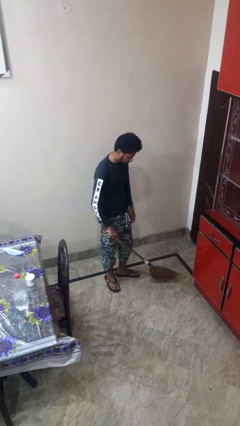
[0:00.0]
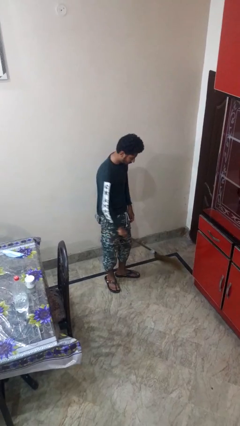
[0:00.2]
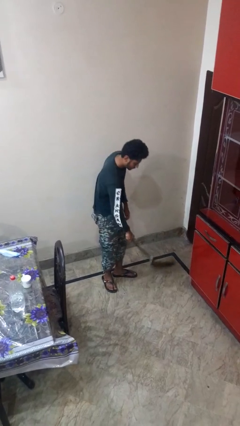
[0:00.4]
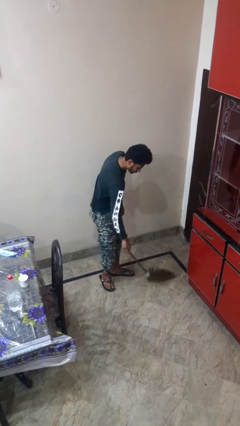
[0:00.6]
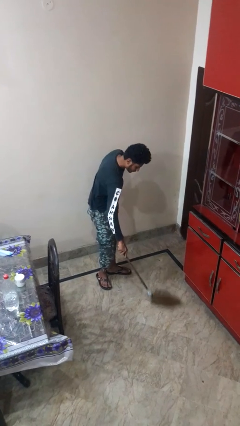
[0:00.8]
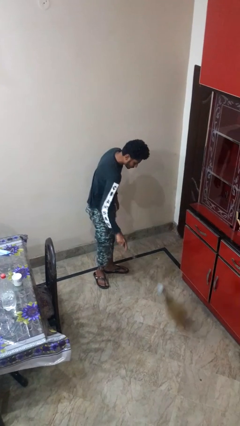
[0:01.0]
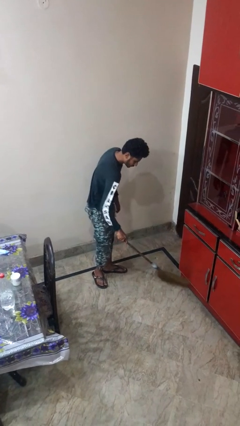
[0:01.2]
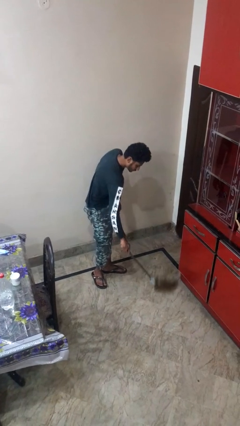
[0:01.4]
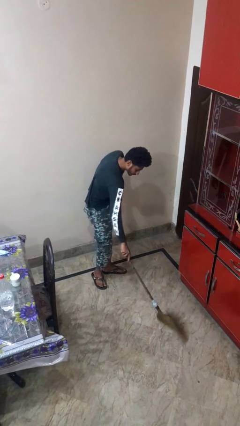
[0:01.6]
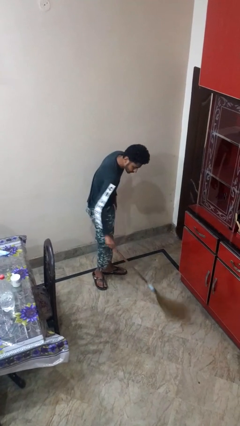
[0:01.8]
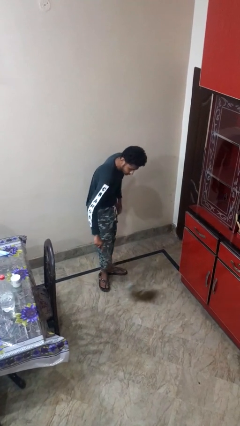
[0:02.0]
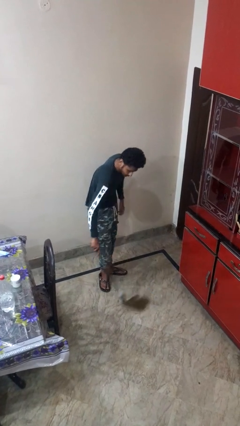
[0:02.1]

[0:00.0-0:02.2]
person sweeps floor

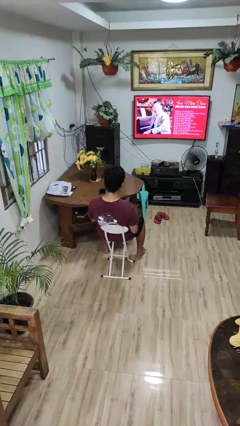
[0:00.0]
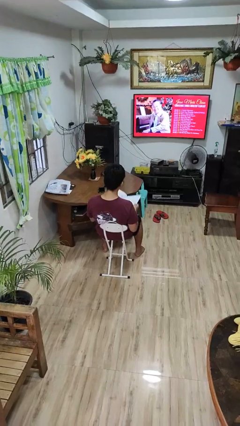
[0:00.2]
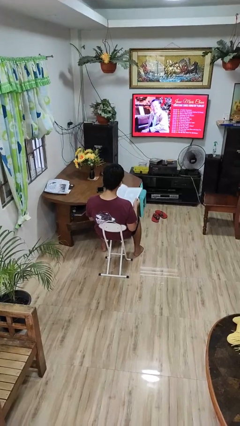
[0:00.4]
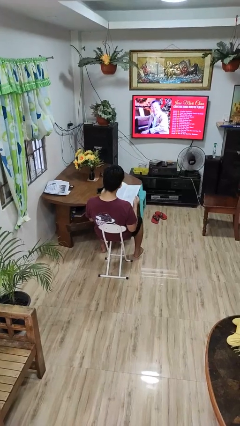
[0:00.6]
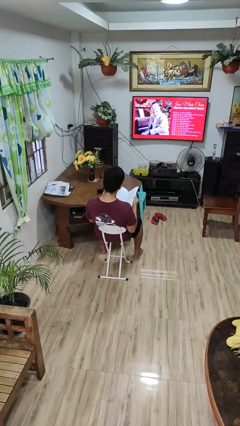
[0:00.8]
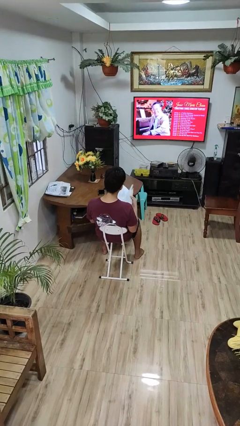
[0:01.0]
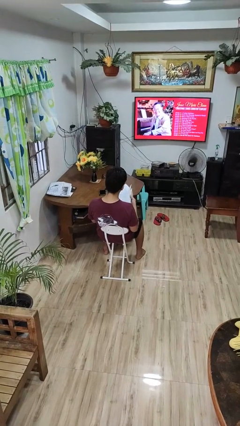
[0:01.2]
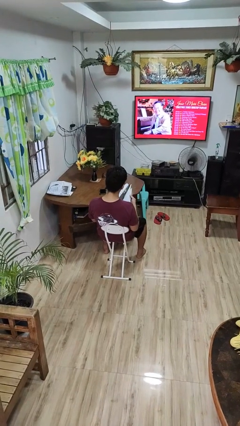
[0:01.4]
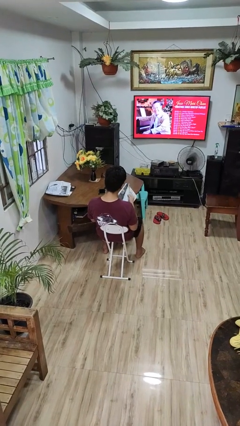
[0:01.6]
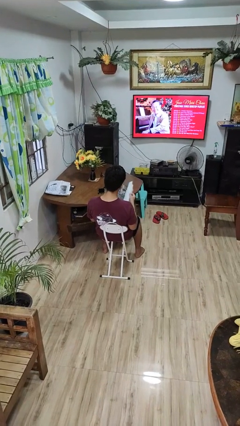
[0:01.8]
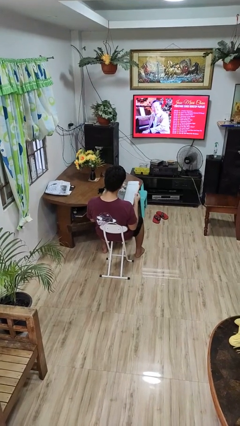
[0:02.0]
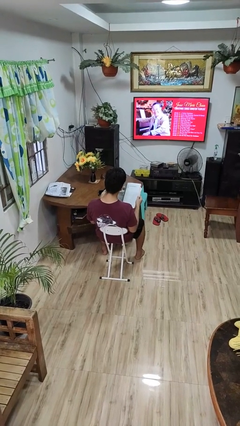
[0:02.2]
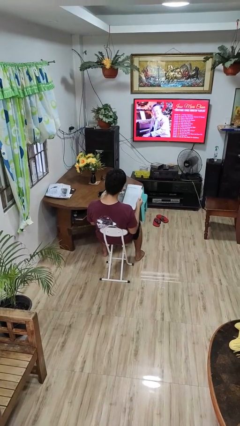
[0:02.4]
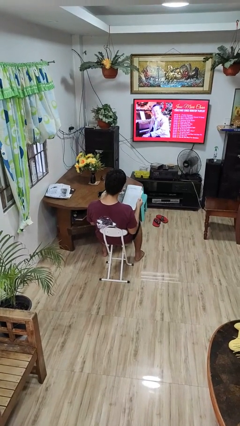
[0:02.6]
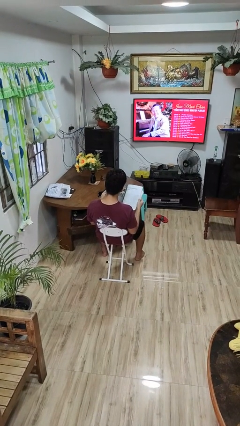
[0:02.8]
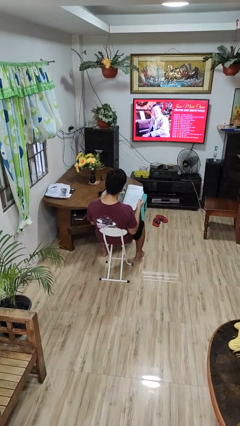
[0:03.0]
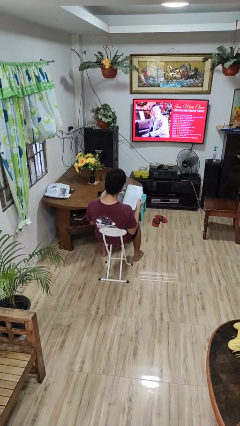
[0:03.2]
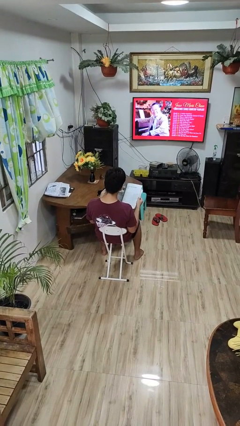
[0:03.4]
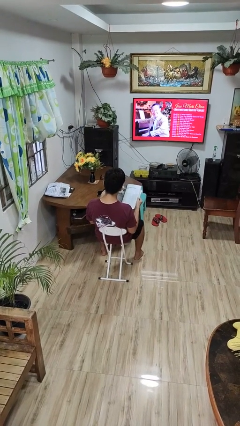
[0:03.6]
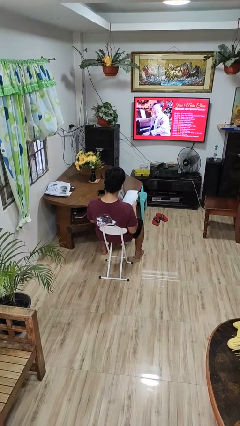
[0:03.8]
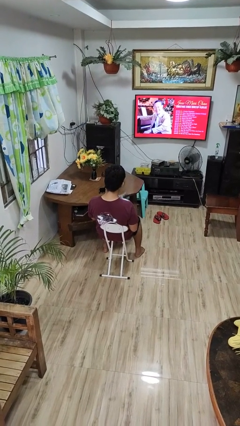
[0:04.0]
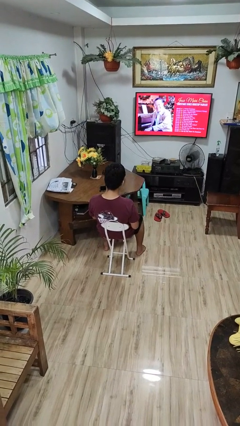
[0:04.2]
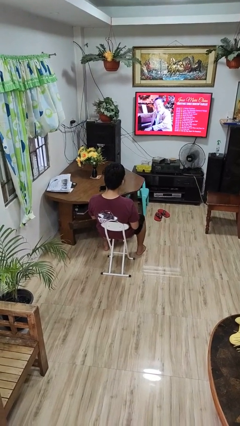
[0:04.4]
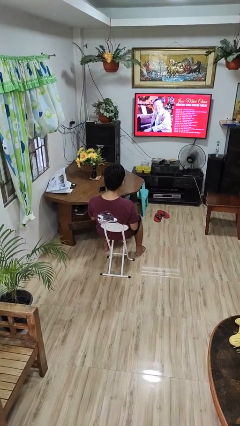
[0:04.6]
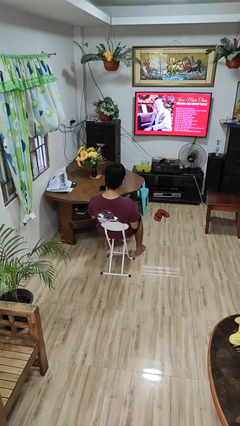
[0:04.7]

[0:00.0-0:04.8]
person reads magazine

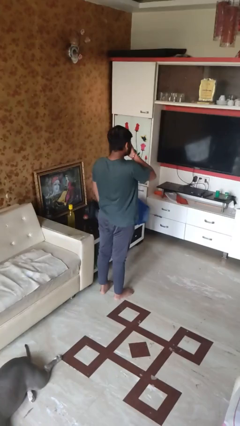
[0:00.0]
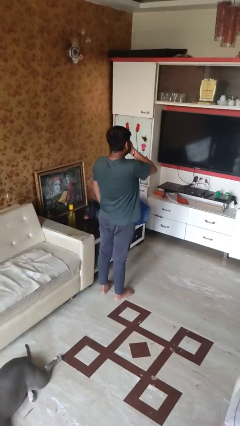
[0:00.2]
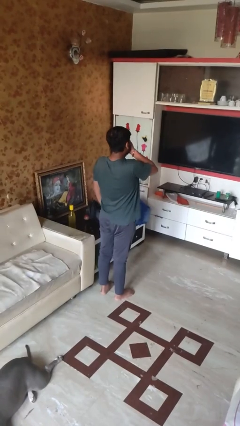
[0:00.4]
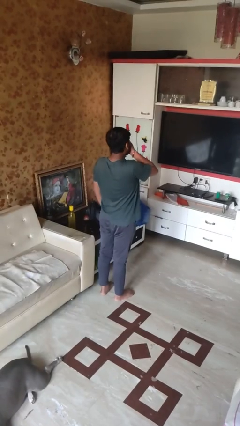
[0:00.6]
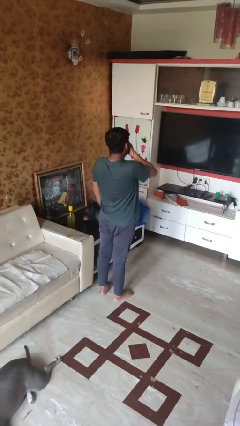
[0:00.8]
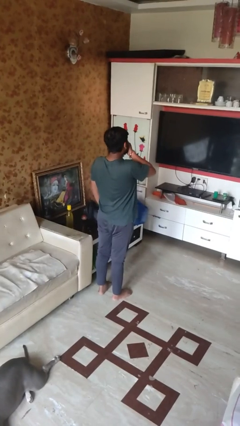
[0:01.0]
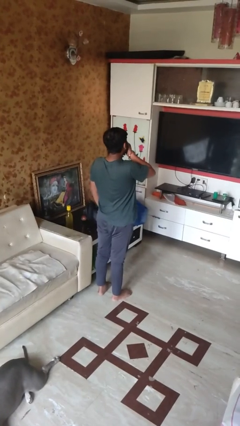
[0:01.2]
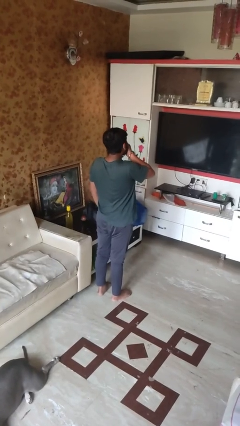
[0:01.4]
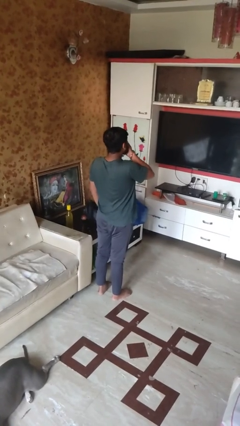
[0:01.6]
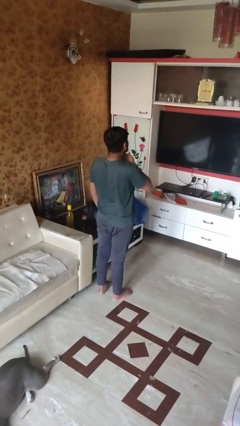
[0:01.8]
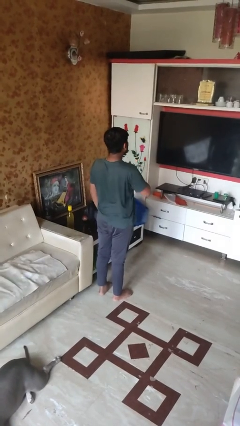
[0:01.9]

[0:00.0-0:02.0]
person yawns

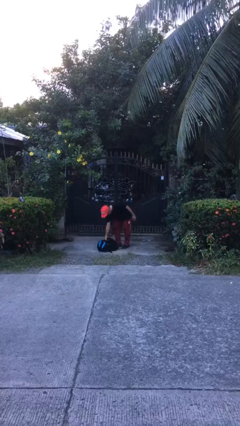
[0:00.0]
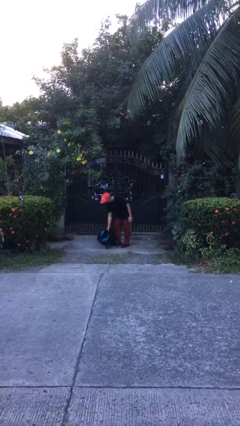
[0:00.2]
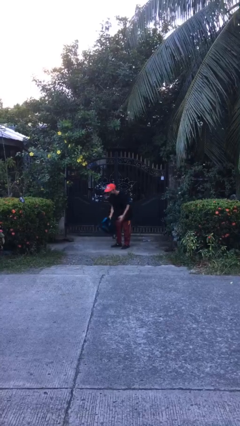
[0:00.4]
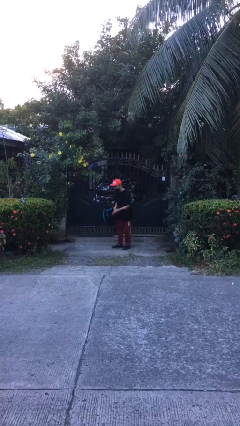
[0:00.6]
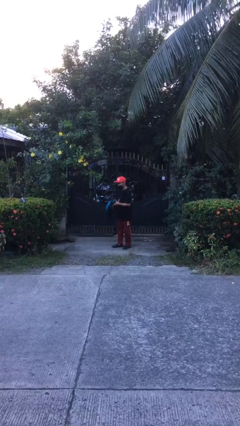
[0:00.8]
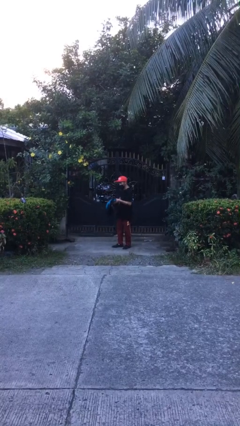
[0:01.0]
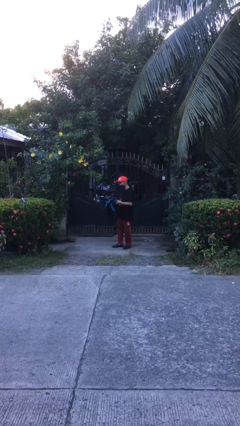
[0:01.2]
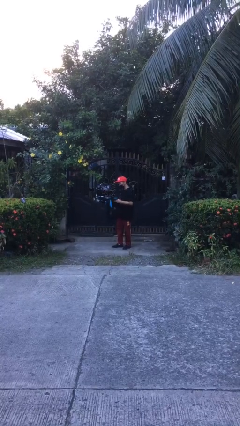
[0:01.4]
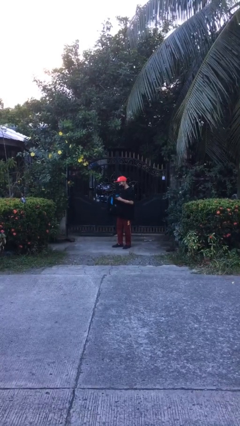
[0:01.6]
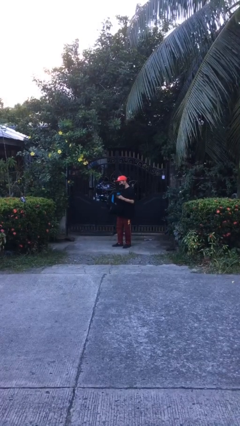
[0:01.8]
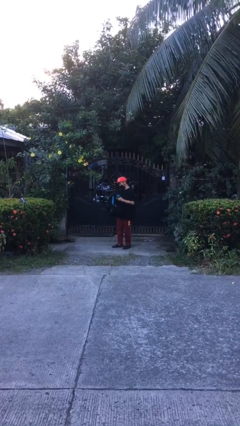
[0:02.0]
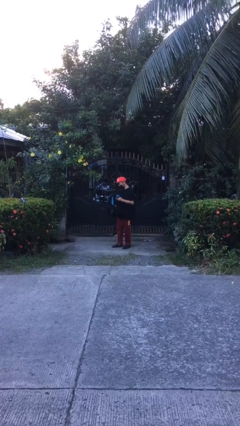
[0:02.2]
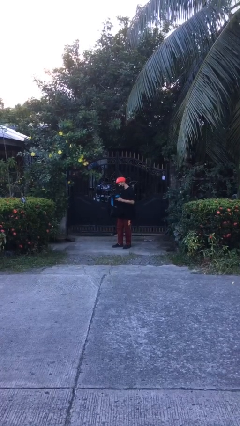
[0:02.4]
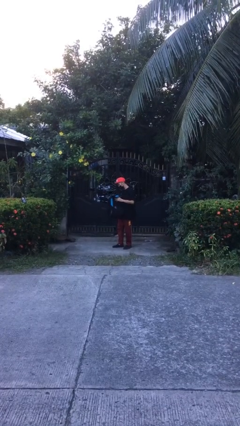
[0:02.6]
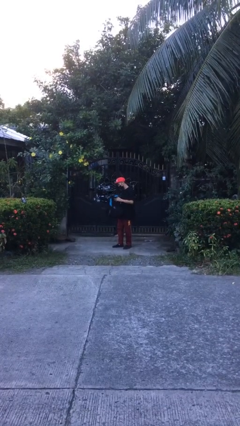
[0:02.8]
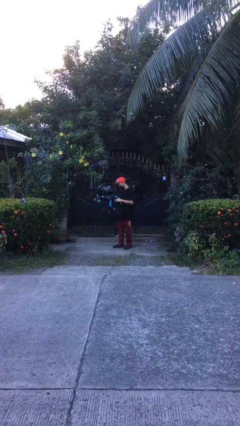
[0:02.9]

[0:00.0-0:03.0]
person picks up object from floor

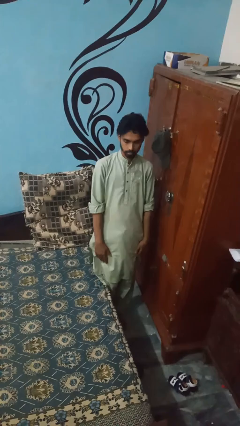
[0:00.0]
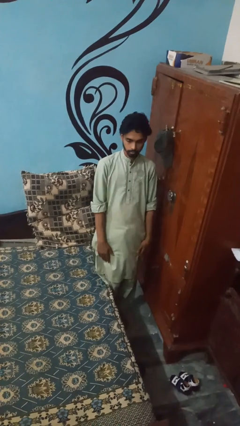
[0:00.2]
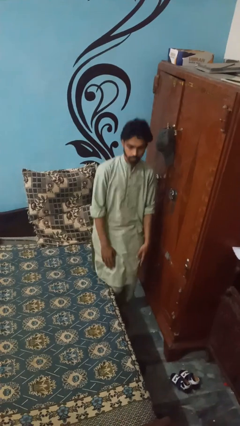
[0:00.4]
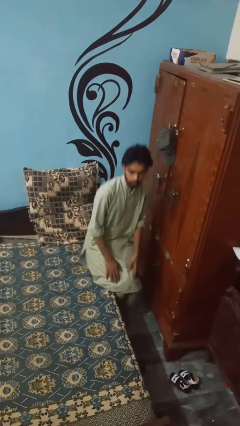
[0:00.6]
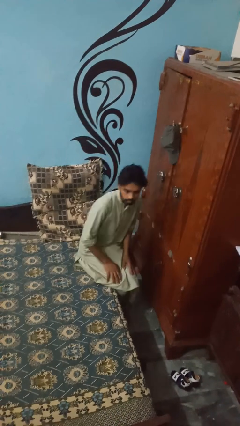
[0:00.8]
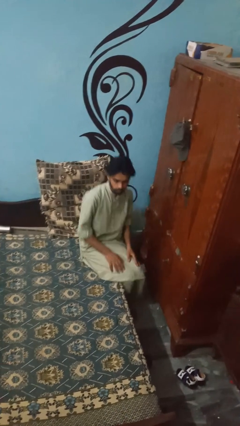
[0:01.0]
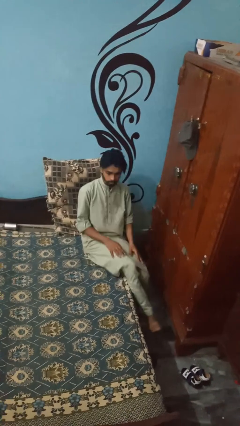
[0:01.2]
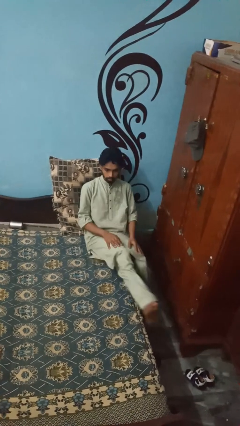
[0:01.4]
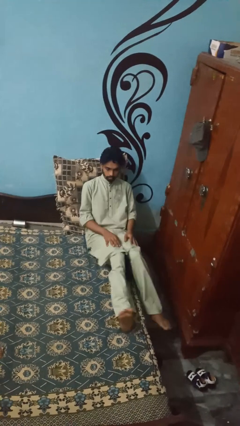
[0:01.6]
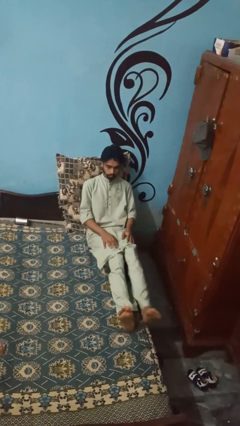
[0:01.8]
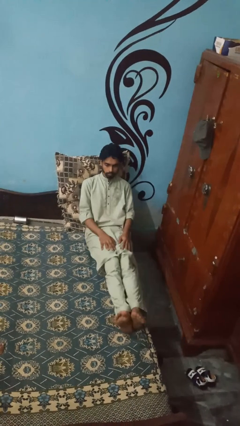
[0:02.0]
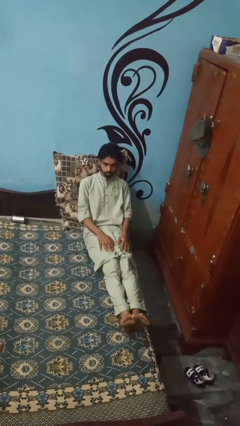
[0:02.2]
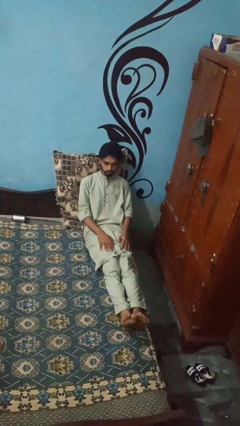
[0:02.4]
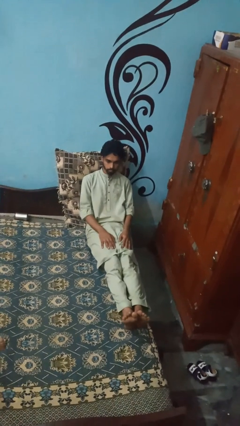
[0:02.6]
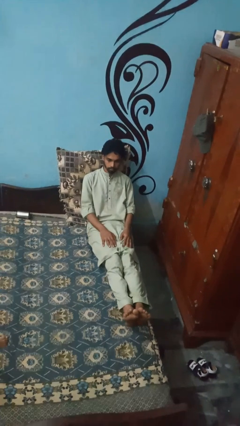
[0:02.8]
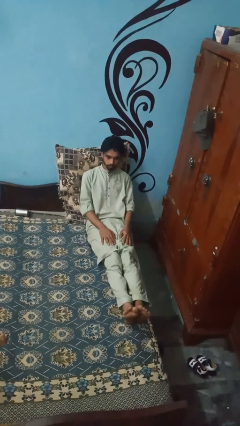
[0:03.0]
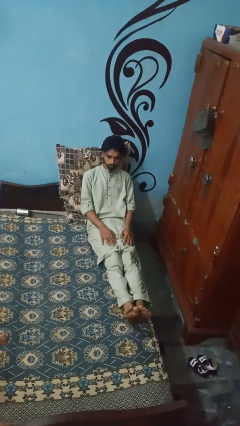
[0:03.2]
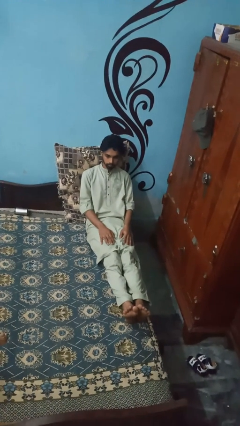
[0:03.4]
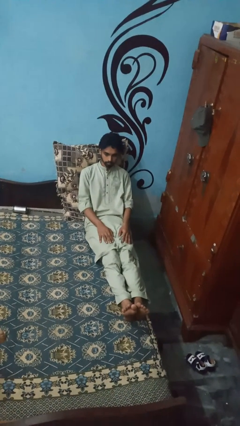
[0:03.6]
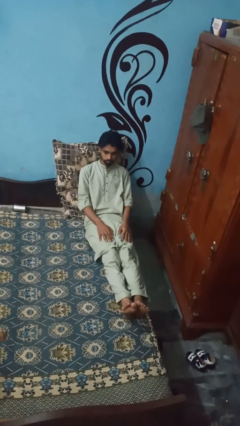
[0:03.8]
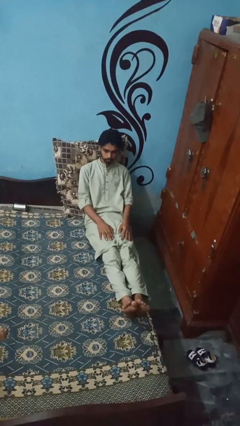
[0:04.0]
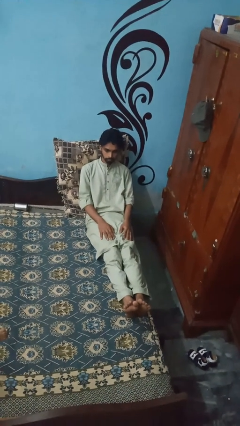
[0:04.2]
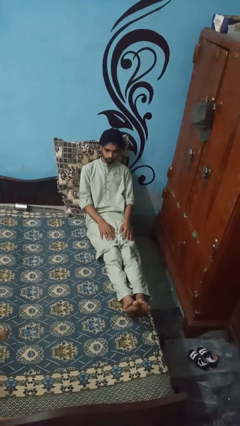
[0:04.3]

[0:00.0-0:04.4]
person lies down on bed

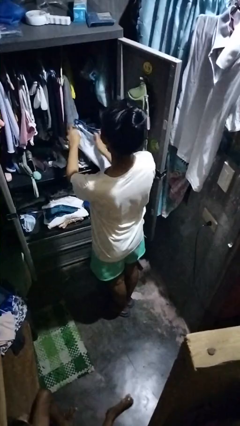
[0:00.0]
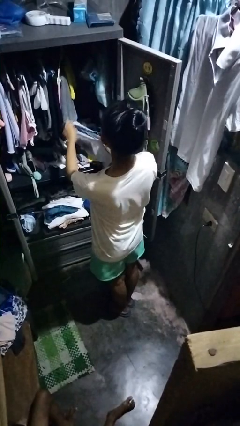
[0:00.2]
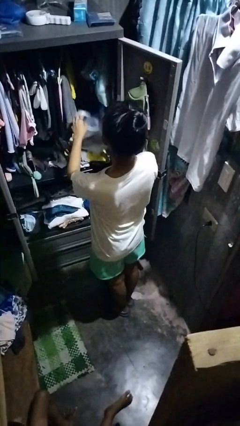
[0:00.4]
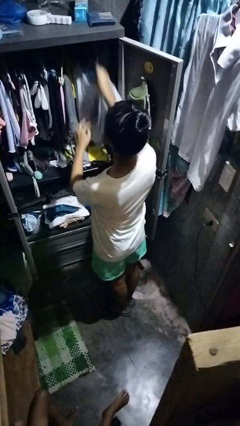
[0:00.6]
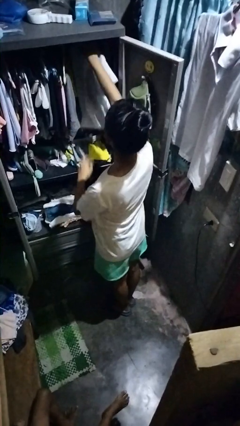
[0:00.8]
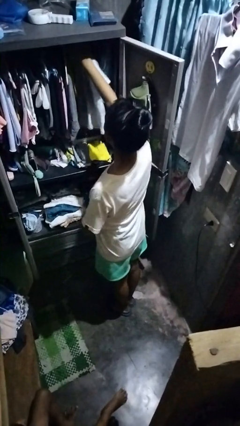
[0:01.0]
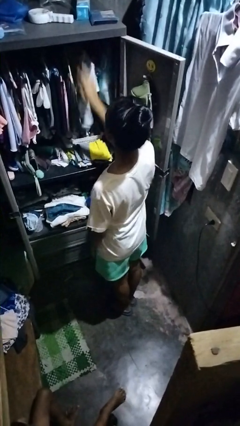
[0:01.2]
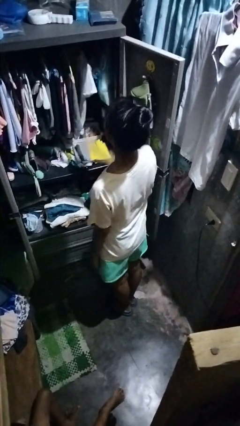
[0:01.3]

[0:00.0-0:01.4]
person puts clothes into closet
